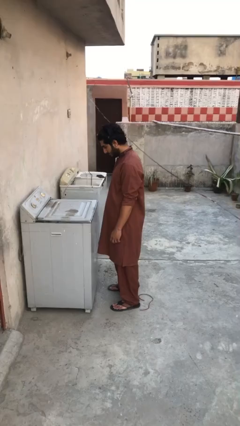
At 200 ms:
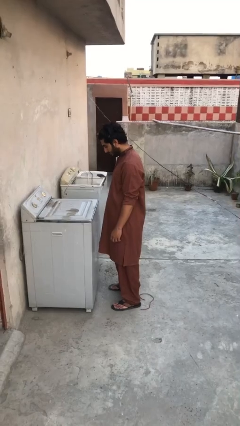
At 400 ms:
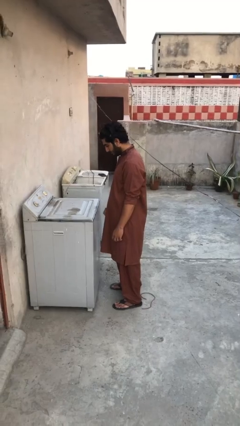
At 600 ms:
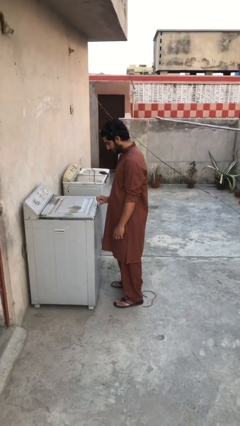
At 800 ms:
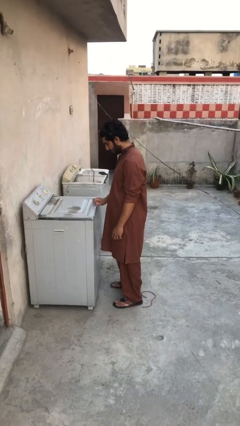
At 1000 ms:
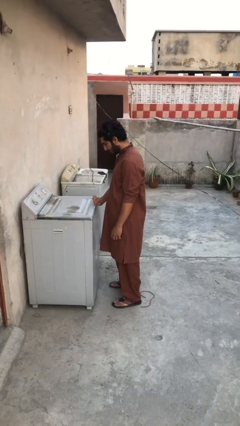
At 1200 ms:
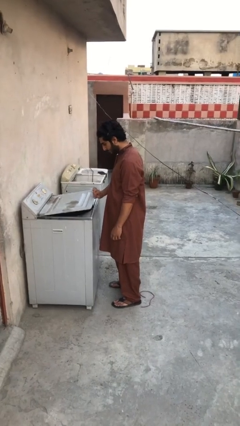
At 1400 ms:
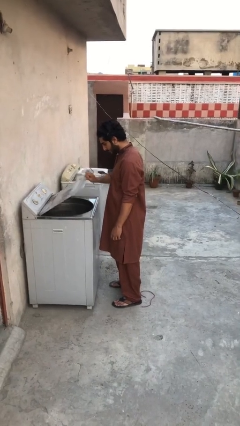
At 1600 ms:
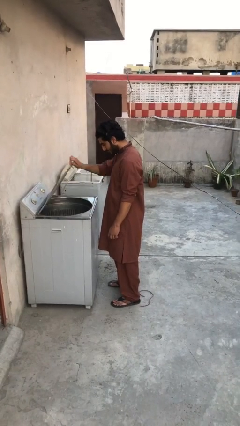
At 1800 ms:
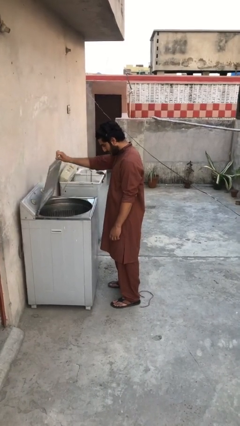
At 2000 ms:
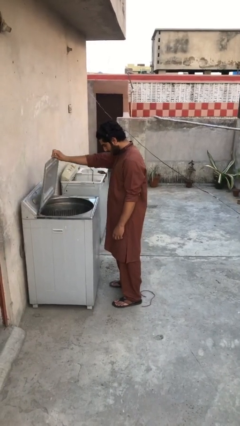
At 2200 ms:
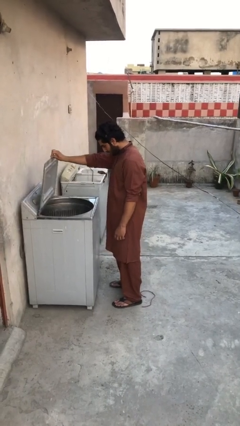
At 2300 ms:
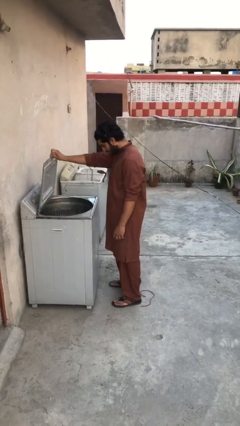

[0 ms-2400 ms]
person opens clothes washer

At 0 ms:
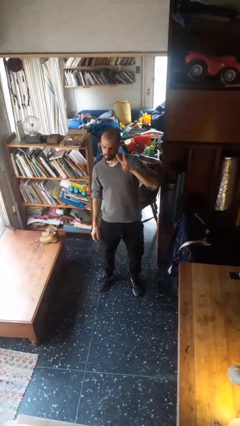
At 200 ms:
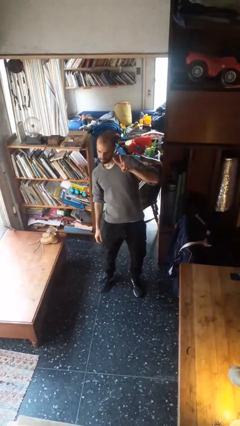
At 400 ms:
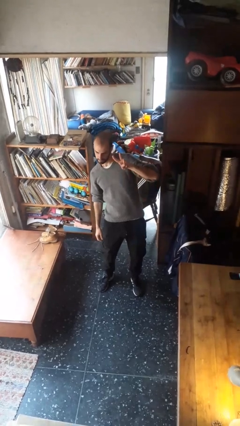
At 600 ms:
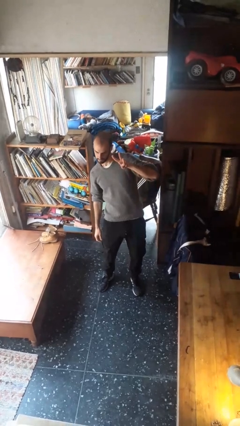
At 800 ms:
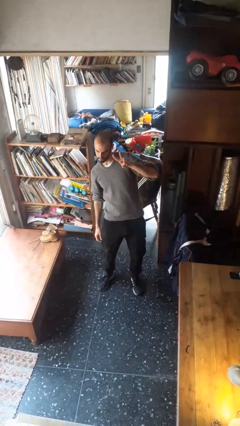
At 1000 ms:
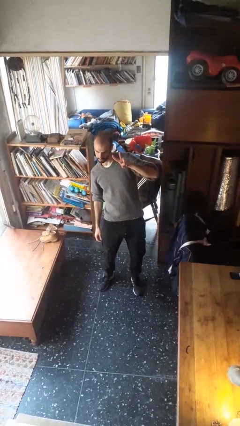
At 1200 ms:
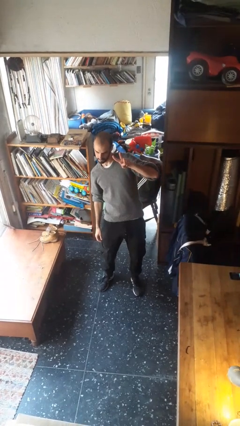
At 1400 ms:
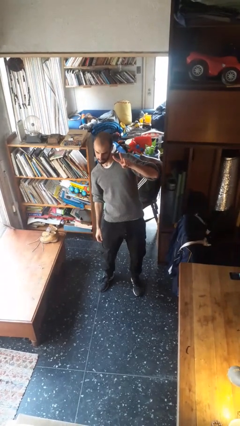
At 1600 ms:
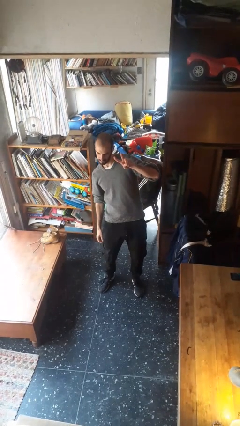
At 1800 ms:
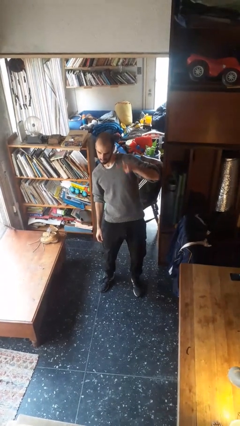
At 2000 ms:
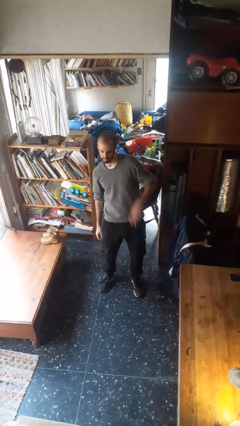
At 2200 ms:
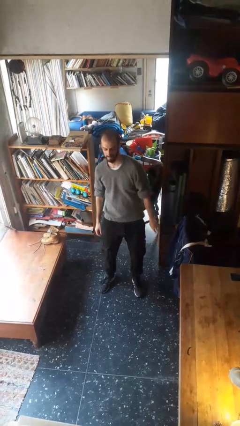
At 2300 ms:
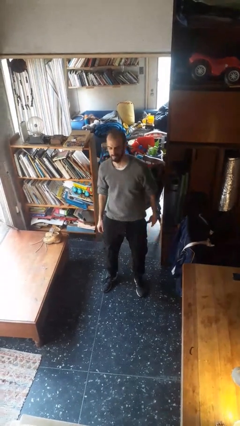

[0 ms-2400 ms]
person gestures peace

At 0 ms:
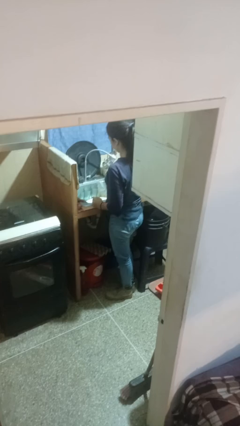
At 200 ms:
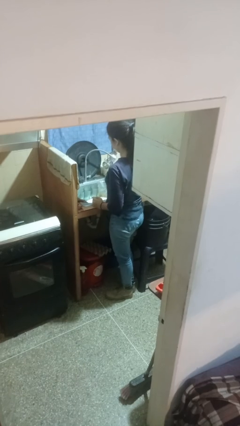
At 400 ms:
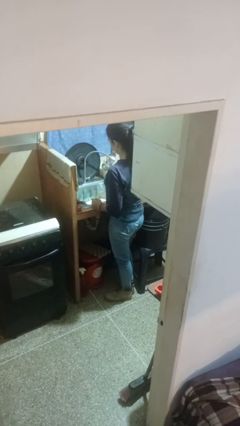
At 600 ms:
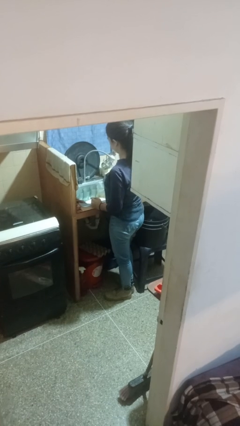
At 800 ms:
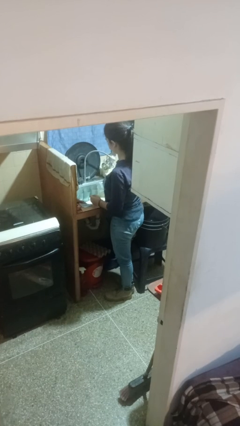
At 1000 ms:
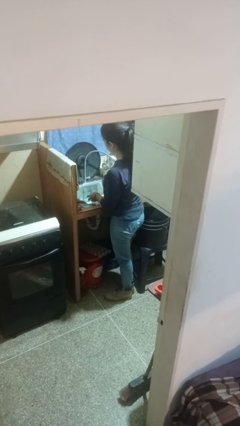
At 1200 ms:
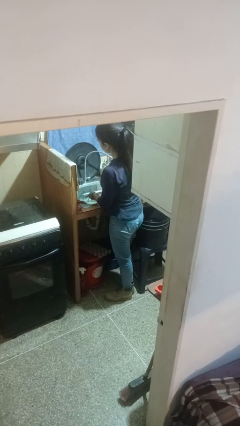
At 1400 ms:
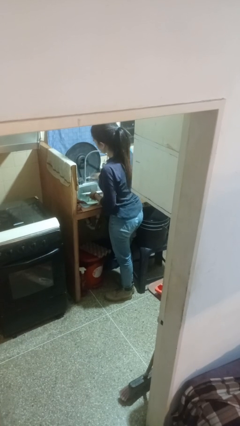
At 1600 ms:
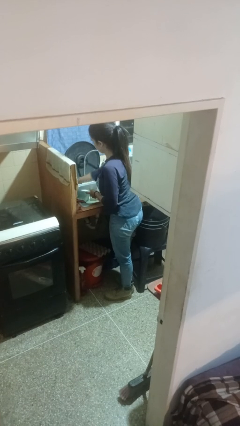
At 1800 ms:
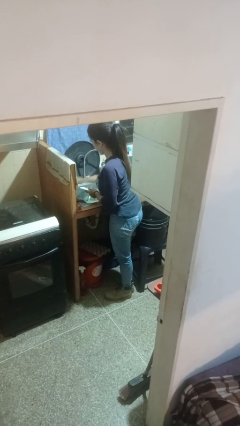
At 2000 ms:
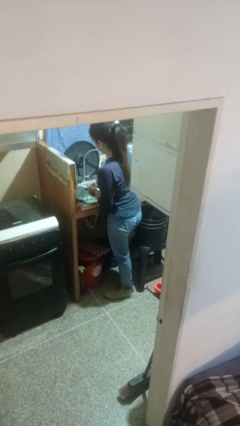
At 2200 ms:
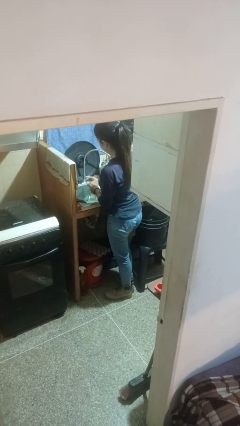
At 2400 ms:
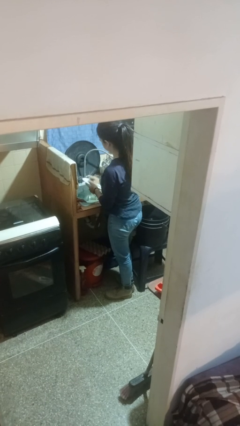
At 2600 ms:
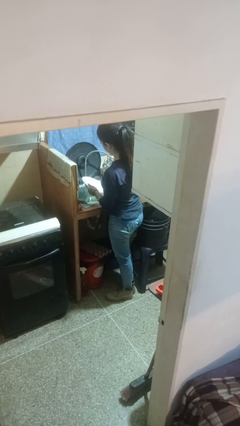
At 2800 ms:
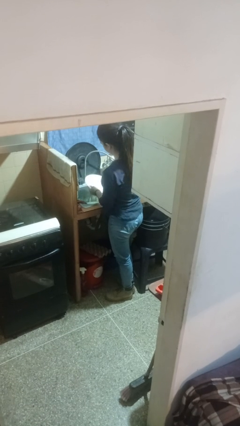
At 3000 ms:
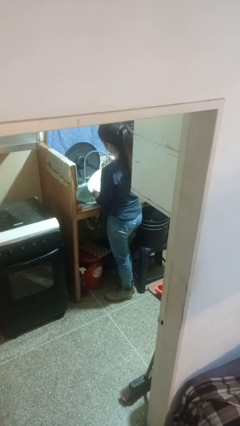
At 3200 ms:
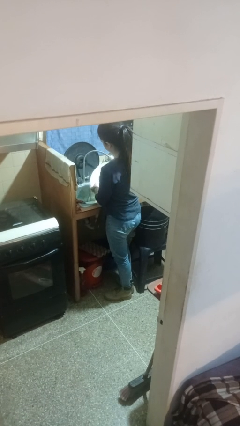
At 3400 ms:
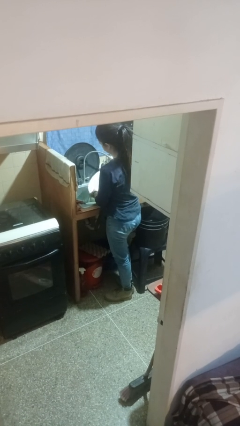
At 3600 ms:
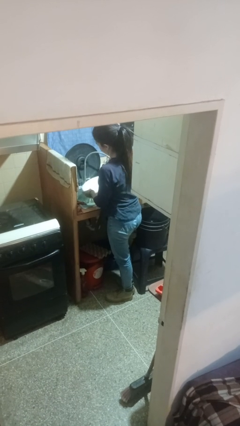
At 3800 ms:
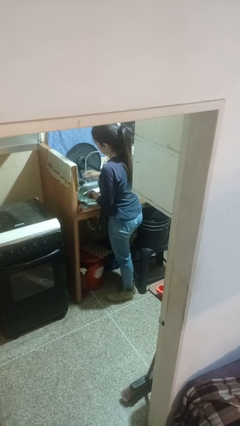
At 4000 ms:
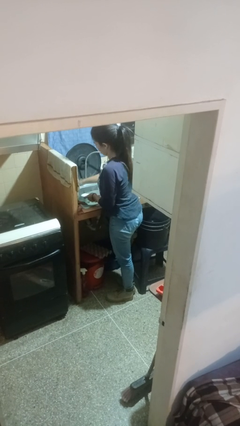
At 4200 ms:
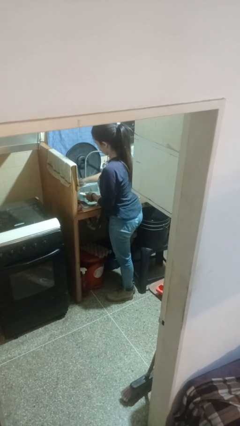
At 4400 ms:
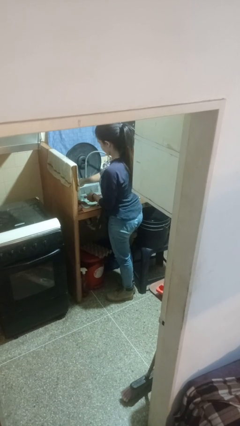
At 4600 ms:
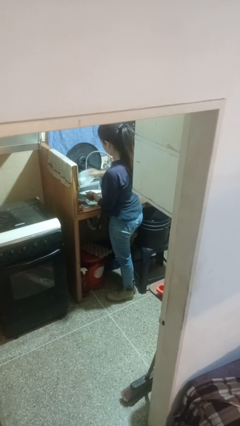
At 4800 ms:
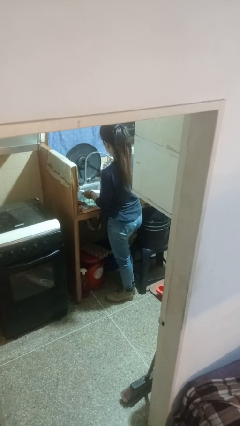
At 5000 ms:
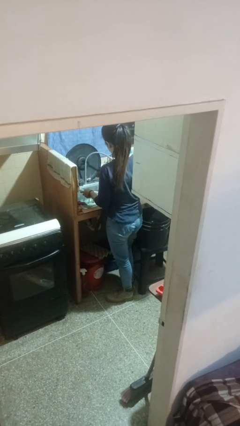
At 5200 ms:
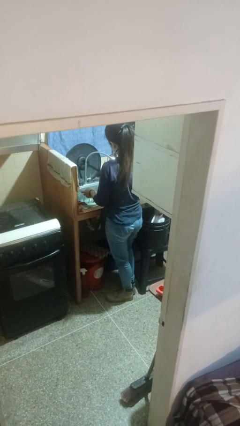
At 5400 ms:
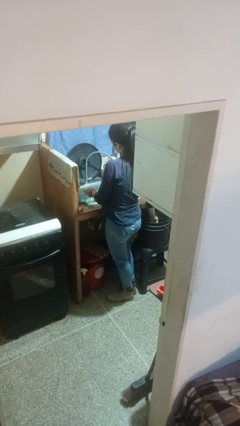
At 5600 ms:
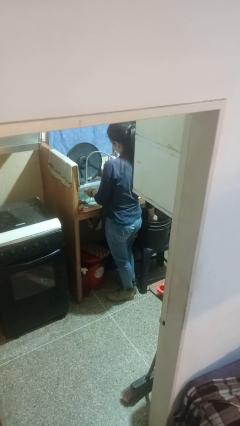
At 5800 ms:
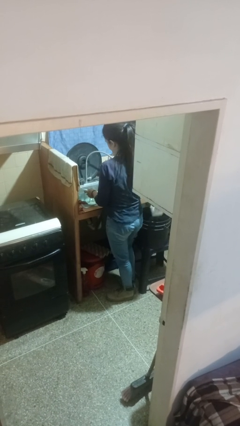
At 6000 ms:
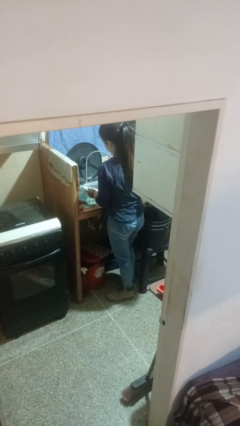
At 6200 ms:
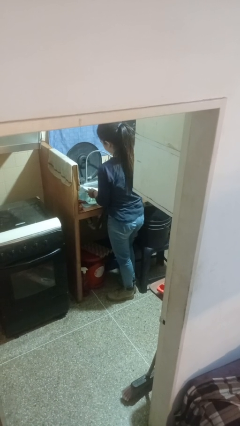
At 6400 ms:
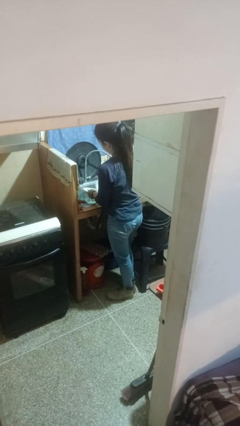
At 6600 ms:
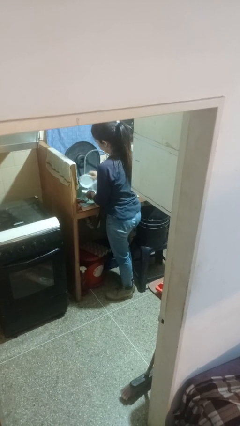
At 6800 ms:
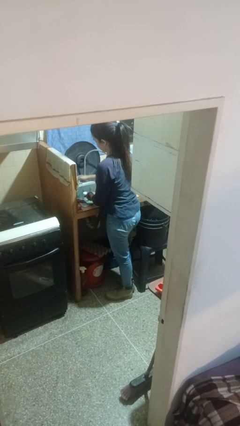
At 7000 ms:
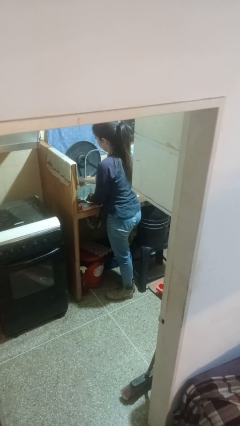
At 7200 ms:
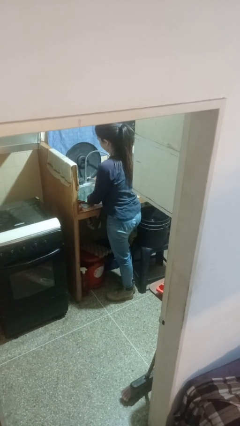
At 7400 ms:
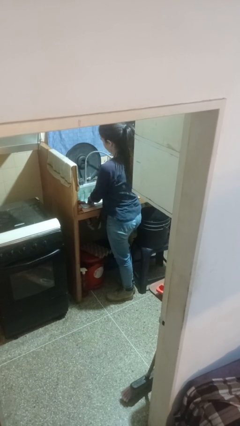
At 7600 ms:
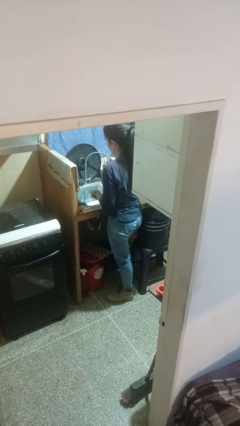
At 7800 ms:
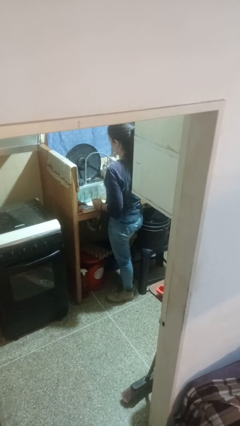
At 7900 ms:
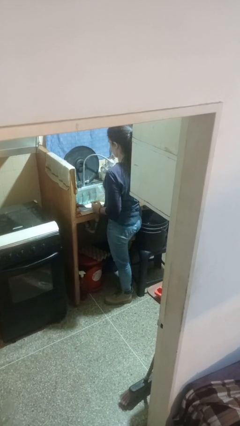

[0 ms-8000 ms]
person washes dish

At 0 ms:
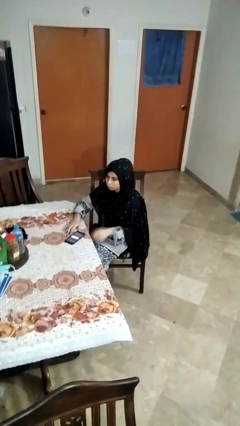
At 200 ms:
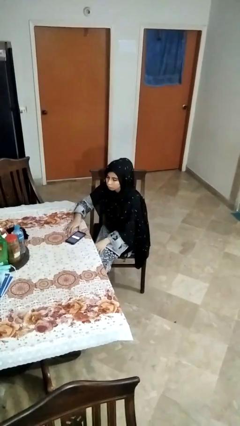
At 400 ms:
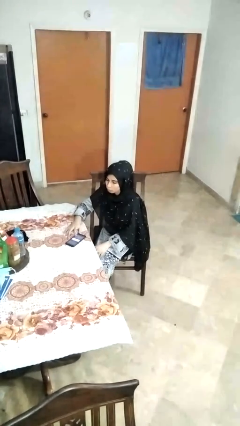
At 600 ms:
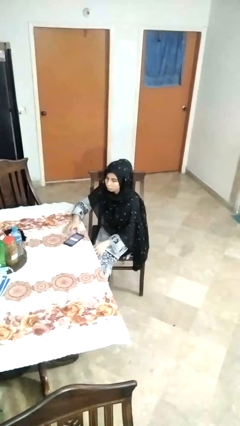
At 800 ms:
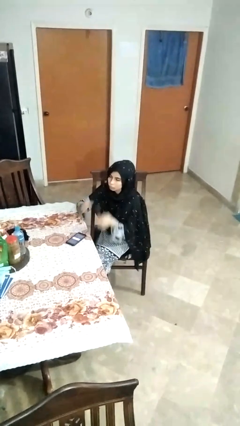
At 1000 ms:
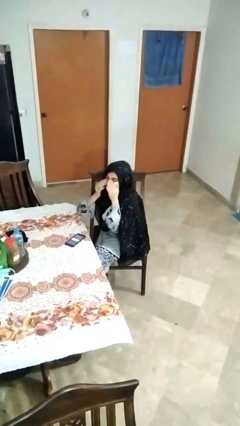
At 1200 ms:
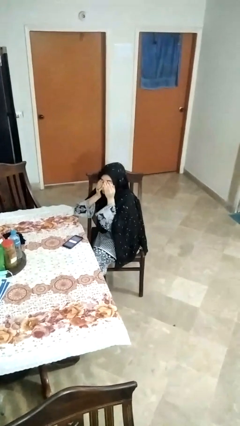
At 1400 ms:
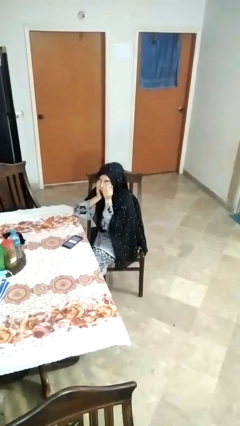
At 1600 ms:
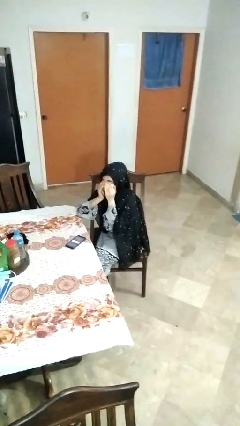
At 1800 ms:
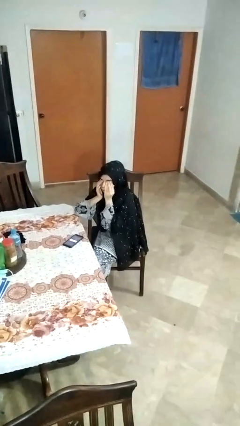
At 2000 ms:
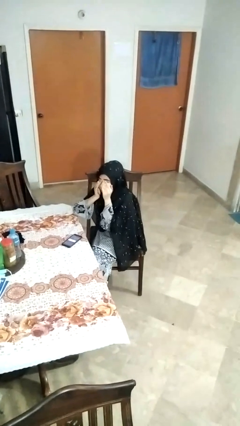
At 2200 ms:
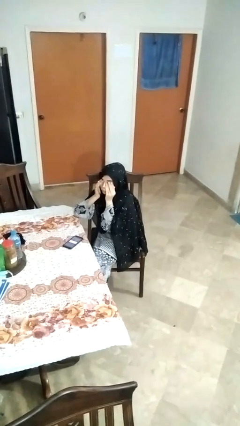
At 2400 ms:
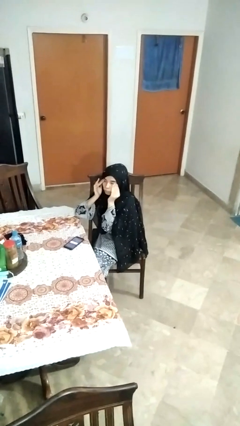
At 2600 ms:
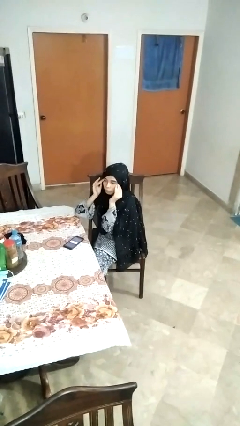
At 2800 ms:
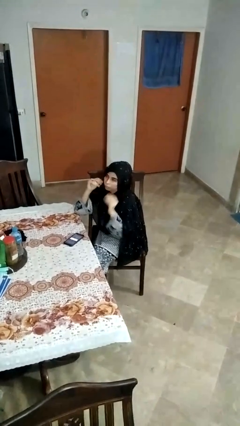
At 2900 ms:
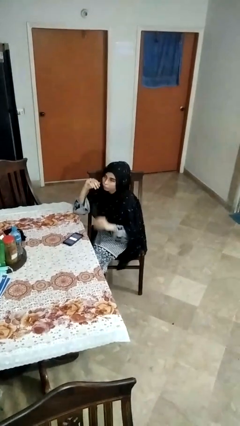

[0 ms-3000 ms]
person rubs eyes

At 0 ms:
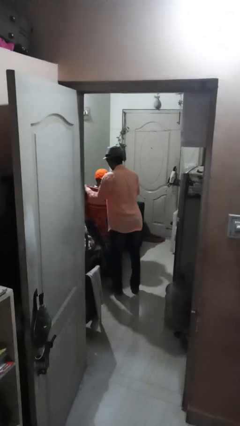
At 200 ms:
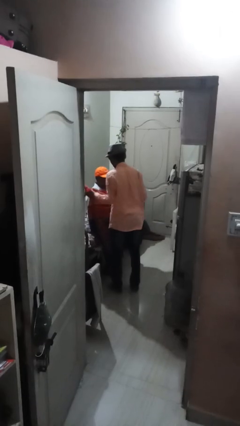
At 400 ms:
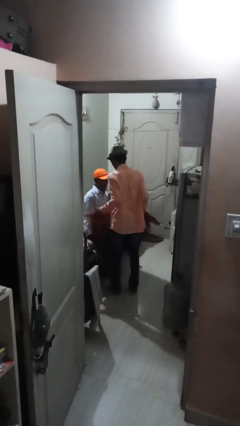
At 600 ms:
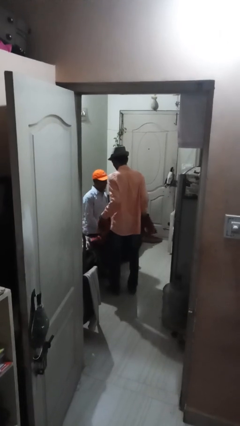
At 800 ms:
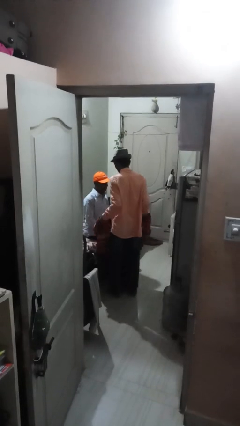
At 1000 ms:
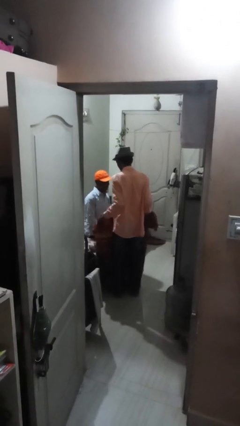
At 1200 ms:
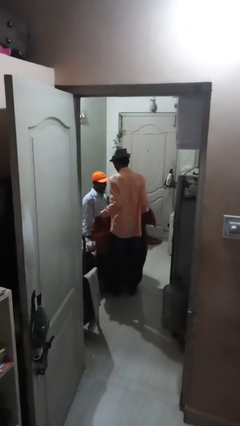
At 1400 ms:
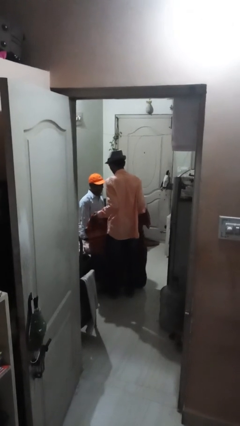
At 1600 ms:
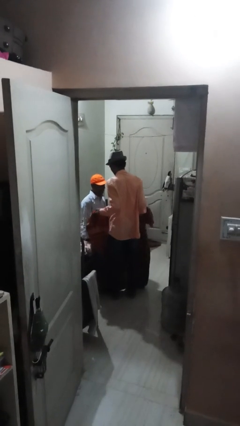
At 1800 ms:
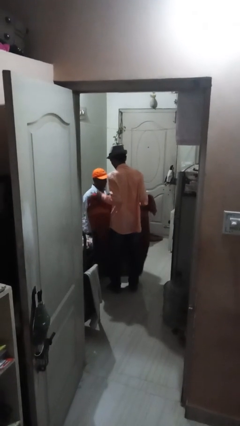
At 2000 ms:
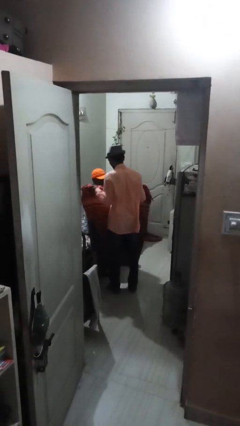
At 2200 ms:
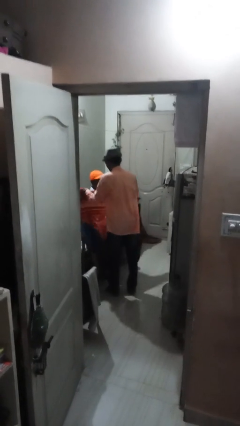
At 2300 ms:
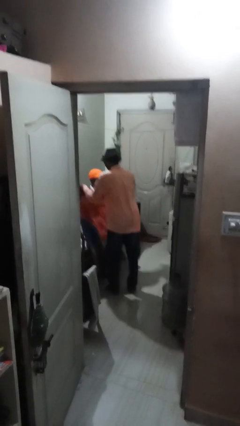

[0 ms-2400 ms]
person uncovers friend with blanket
